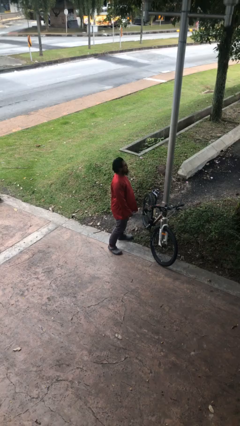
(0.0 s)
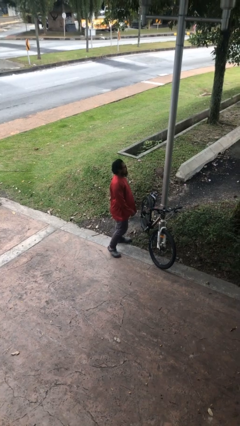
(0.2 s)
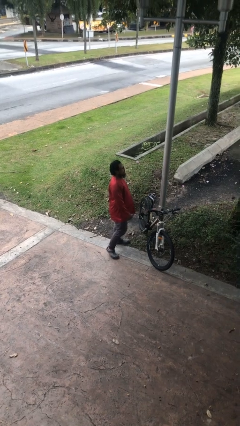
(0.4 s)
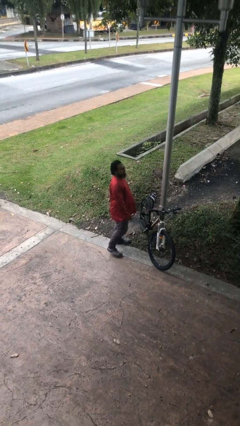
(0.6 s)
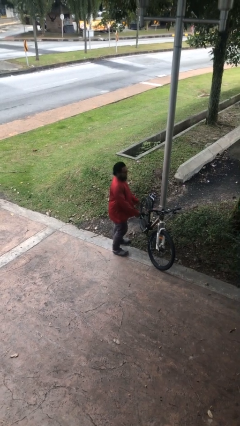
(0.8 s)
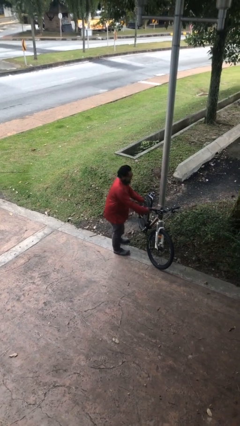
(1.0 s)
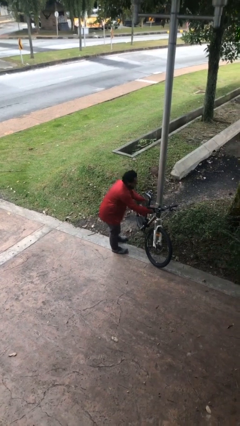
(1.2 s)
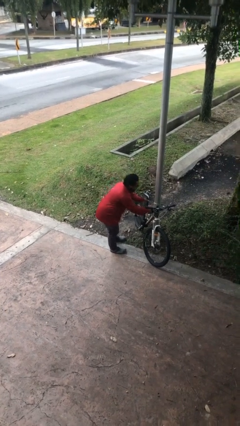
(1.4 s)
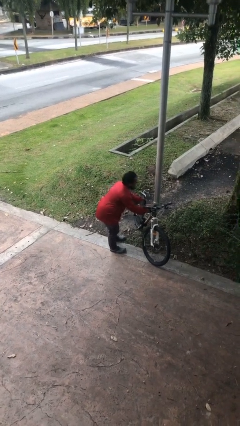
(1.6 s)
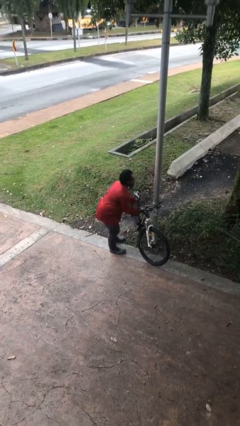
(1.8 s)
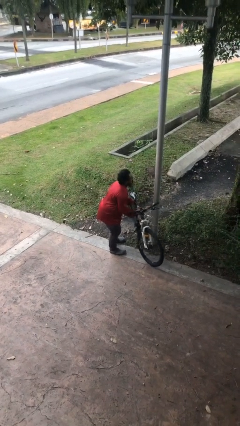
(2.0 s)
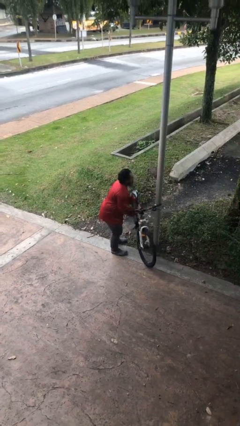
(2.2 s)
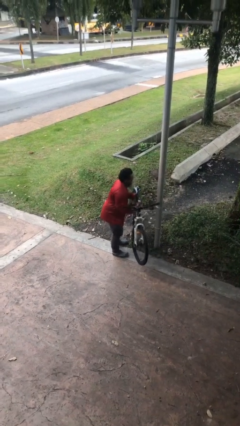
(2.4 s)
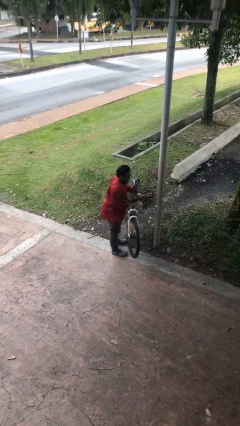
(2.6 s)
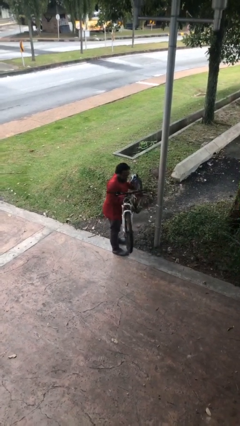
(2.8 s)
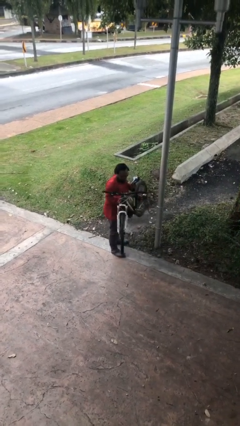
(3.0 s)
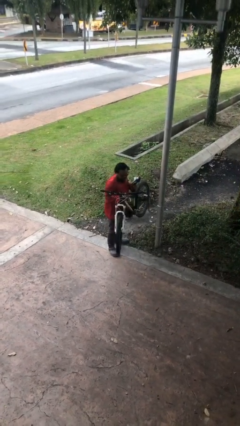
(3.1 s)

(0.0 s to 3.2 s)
person picks up object from floor

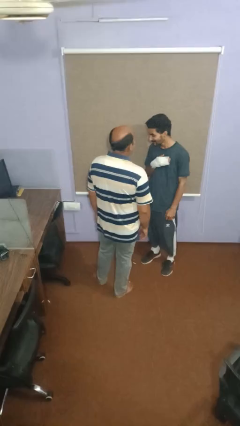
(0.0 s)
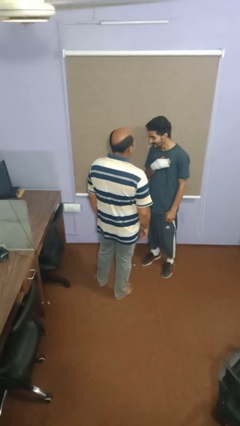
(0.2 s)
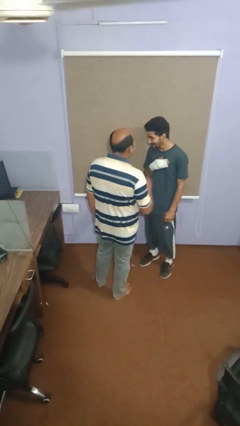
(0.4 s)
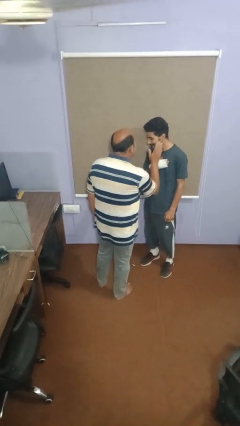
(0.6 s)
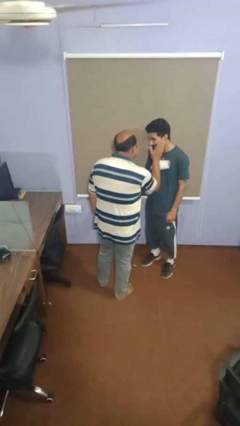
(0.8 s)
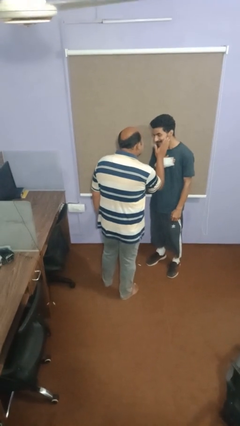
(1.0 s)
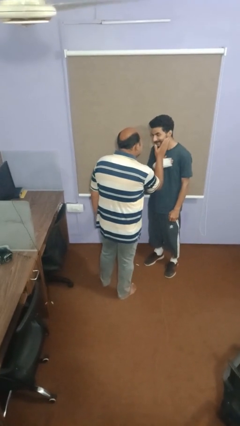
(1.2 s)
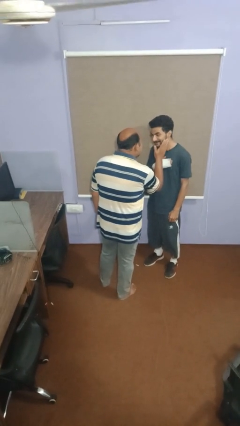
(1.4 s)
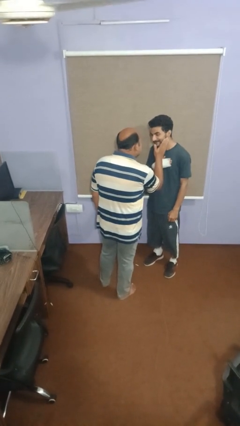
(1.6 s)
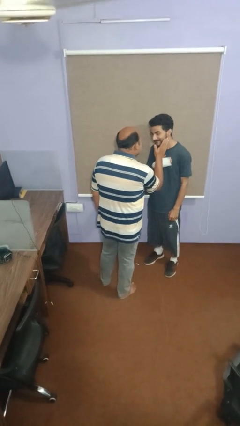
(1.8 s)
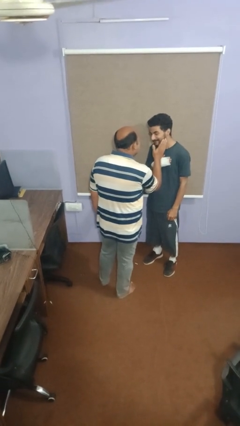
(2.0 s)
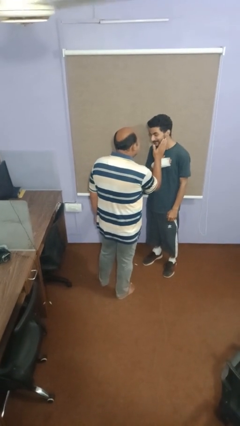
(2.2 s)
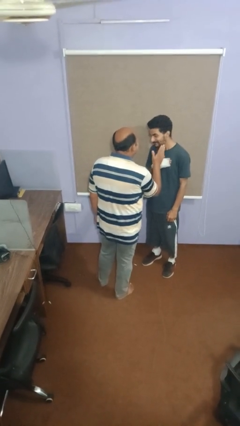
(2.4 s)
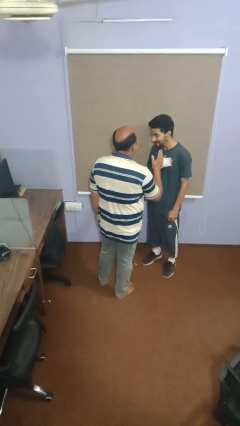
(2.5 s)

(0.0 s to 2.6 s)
person touches face of person

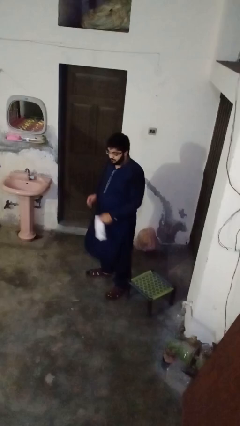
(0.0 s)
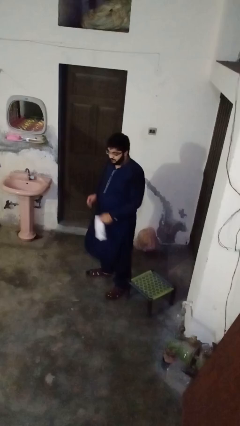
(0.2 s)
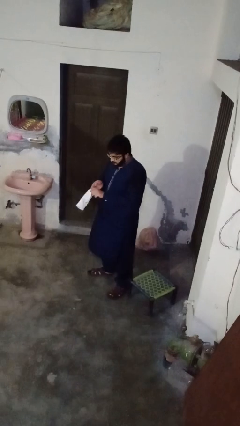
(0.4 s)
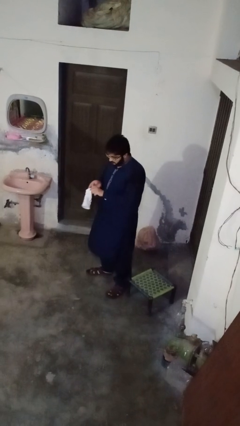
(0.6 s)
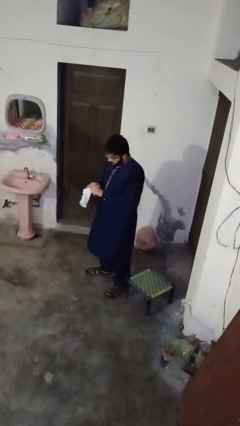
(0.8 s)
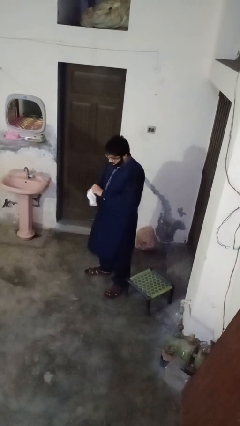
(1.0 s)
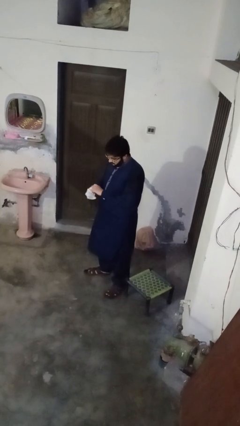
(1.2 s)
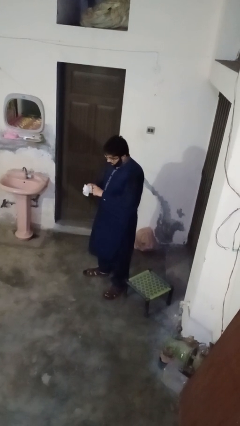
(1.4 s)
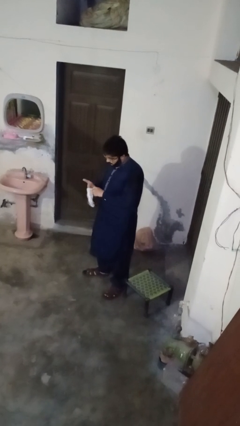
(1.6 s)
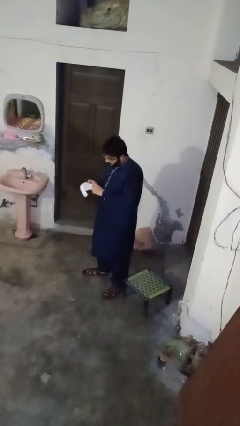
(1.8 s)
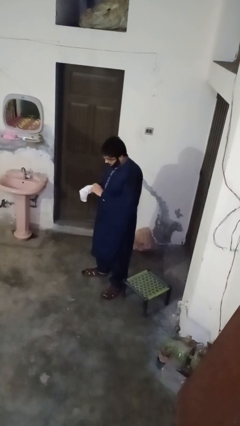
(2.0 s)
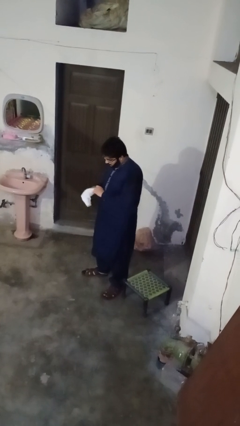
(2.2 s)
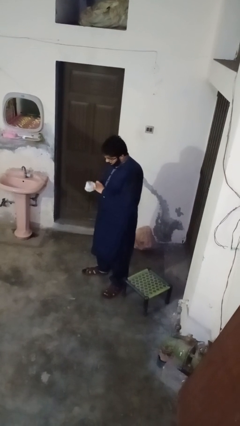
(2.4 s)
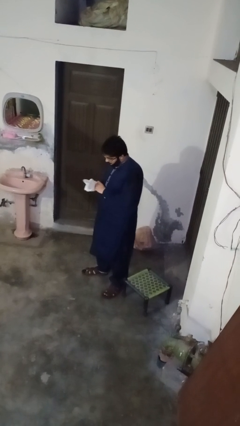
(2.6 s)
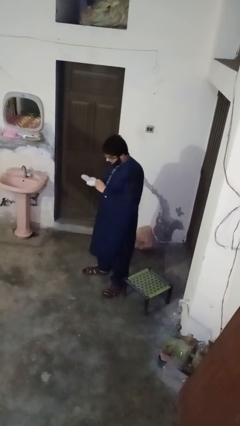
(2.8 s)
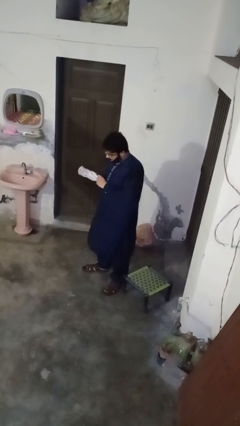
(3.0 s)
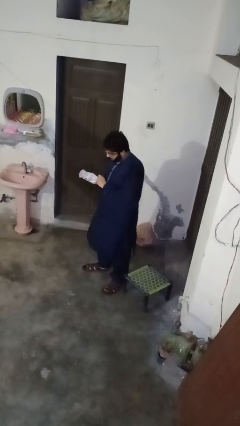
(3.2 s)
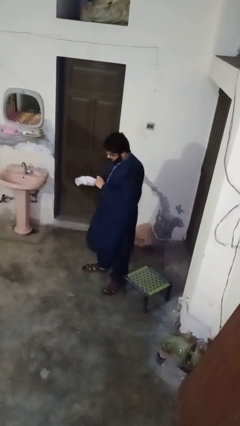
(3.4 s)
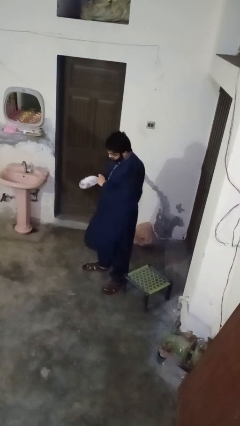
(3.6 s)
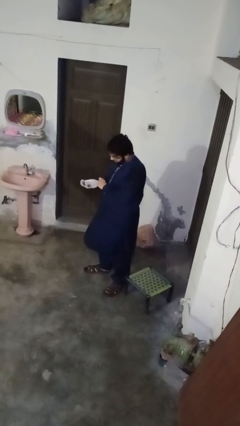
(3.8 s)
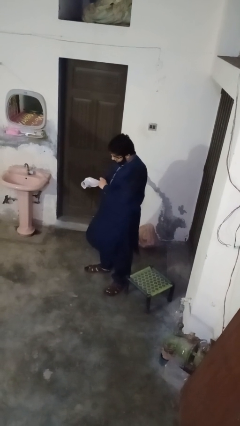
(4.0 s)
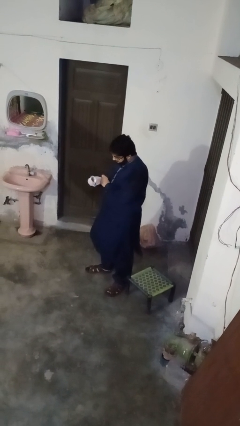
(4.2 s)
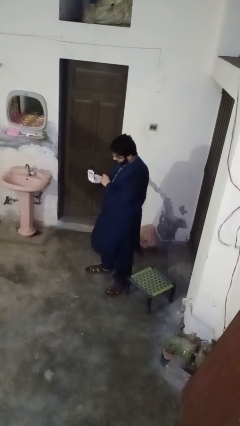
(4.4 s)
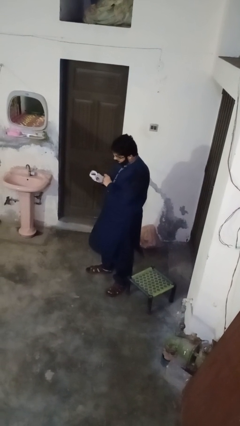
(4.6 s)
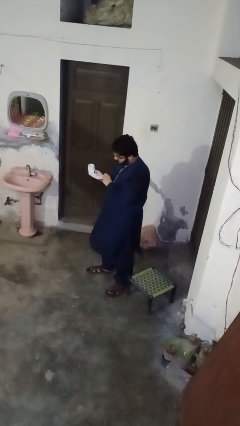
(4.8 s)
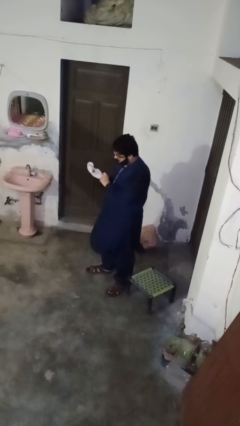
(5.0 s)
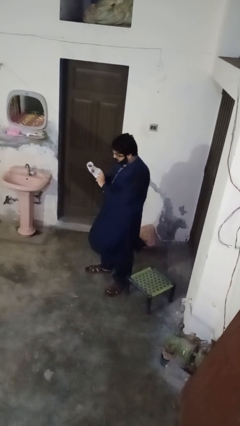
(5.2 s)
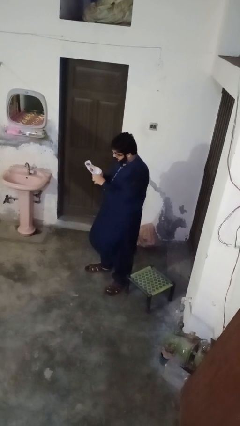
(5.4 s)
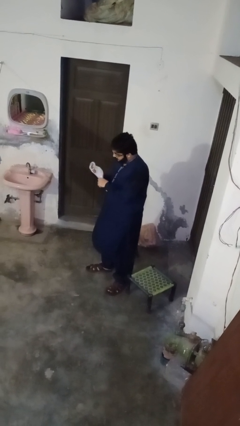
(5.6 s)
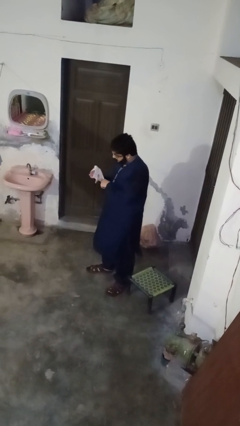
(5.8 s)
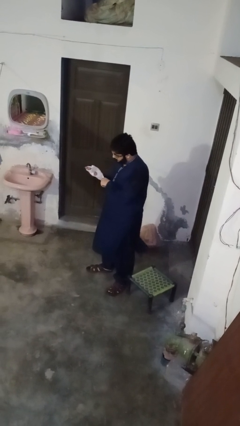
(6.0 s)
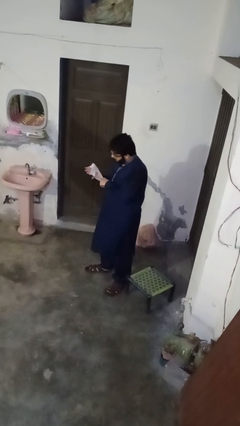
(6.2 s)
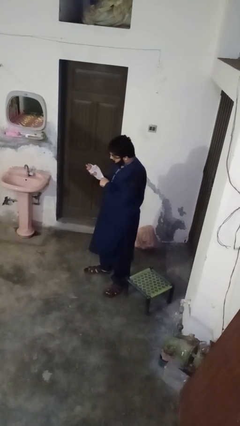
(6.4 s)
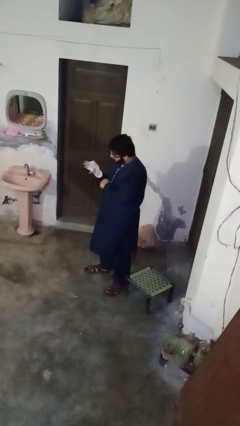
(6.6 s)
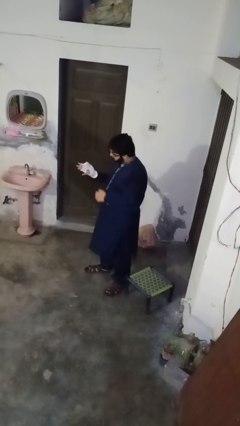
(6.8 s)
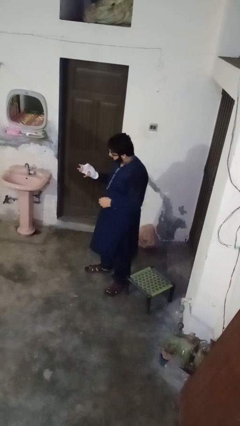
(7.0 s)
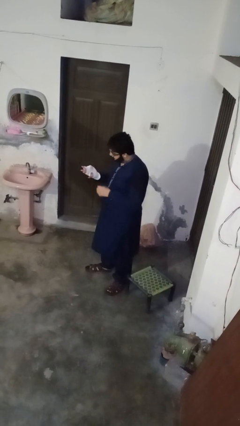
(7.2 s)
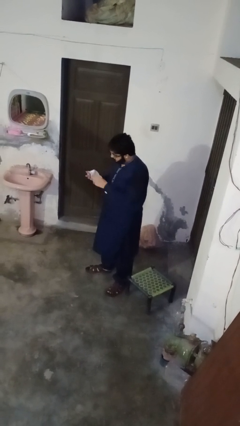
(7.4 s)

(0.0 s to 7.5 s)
person puts on gloves

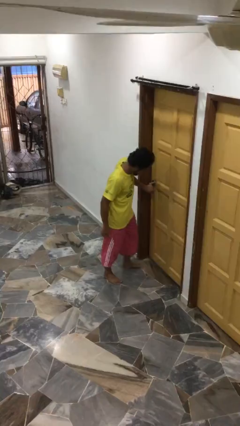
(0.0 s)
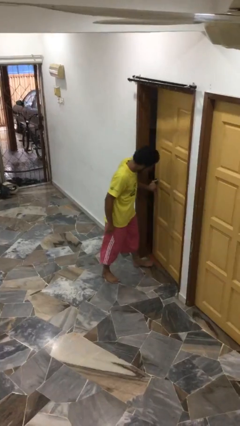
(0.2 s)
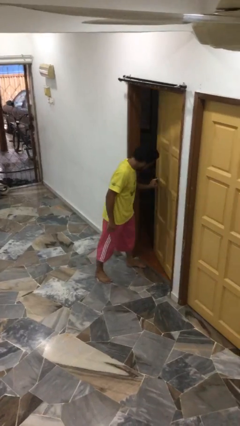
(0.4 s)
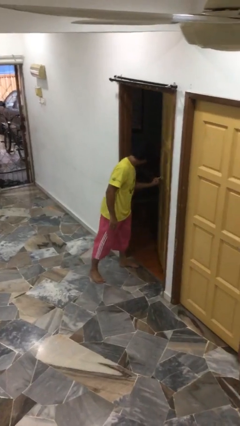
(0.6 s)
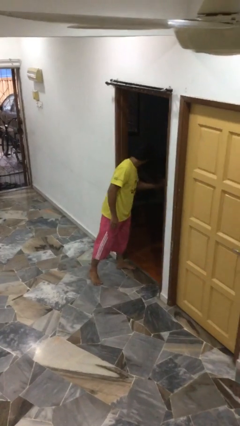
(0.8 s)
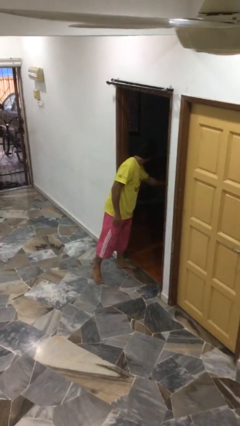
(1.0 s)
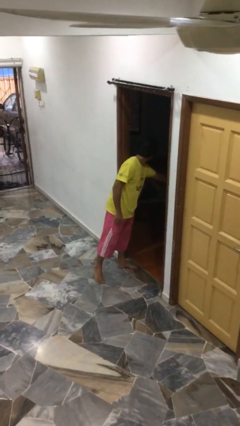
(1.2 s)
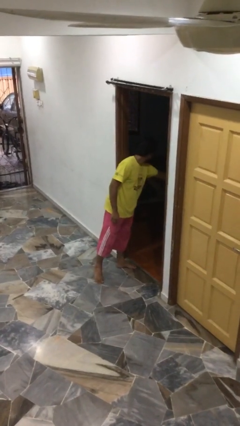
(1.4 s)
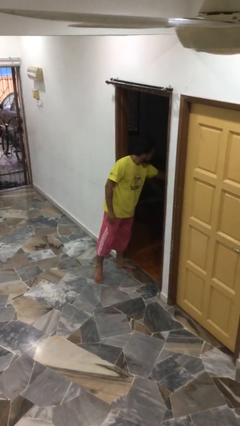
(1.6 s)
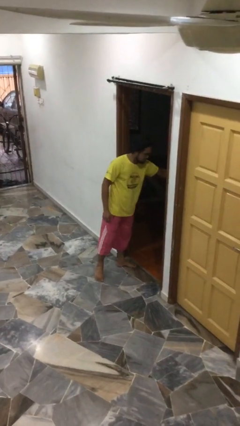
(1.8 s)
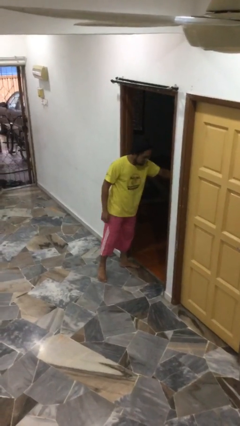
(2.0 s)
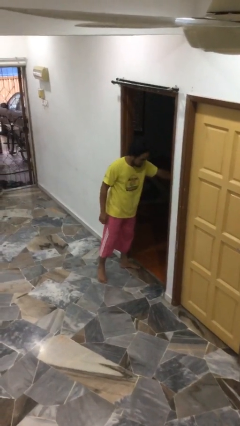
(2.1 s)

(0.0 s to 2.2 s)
person opens facility door

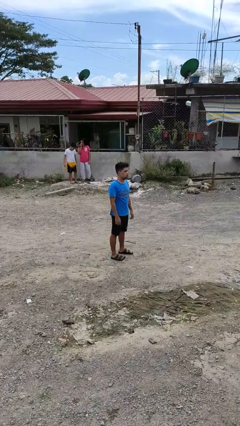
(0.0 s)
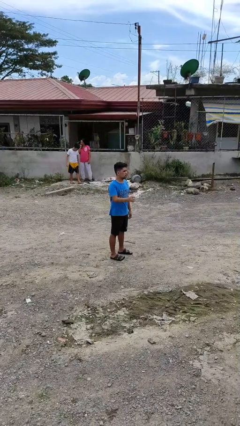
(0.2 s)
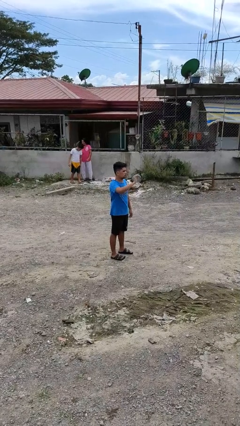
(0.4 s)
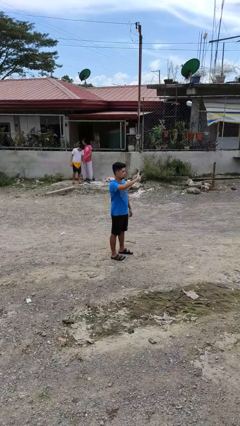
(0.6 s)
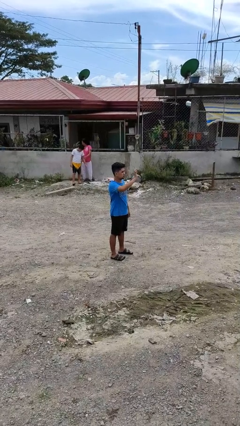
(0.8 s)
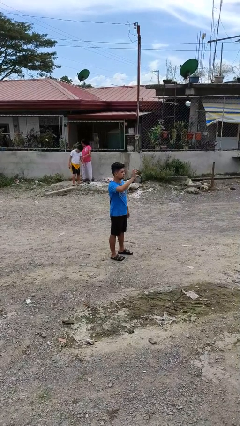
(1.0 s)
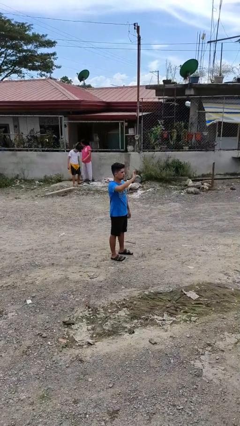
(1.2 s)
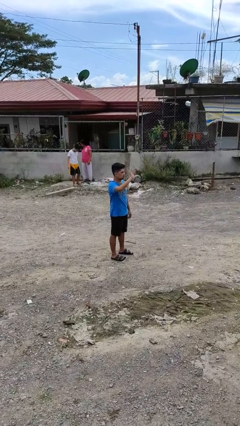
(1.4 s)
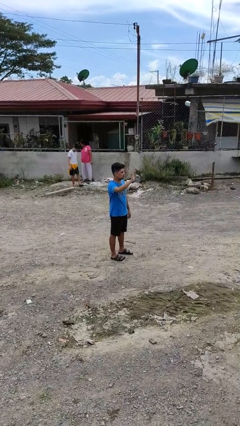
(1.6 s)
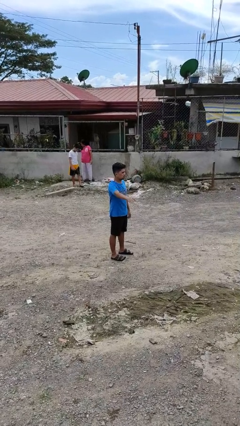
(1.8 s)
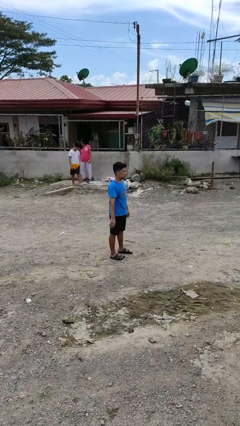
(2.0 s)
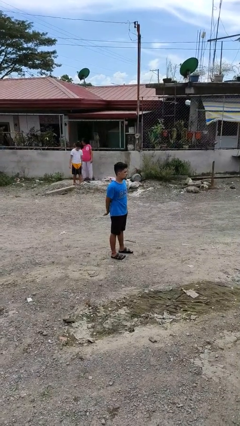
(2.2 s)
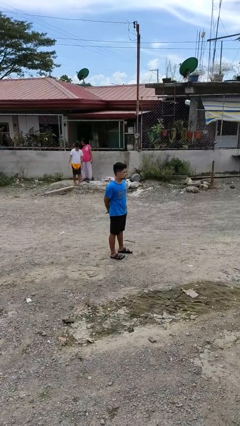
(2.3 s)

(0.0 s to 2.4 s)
person waves at person
